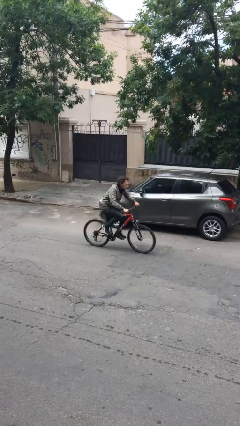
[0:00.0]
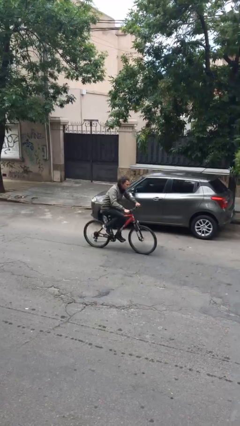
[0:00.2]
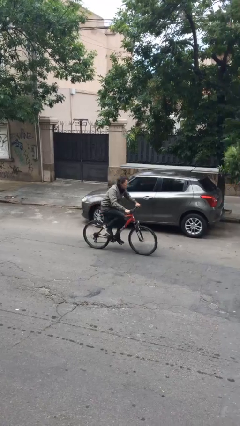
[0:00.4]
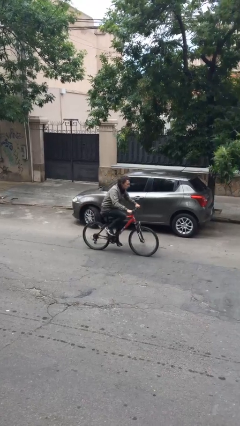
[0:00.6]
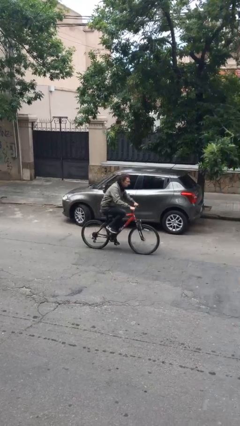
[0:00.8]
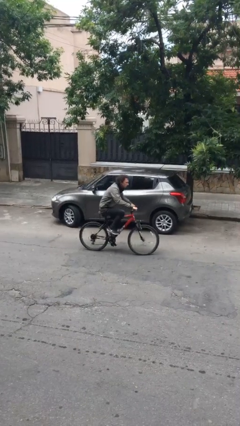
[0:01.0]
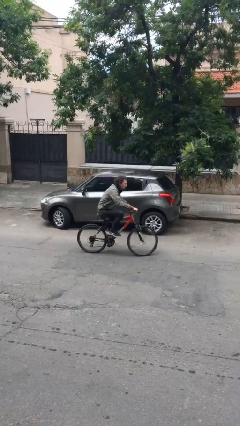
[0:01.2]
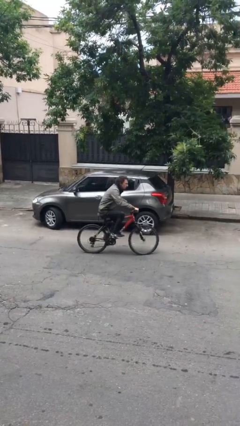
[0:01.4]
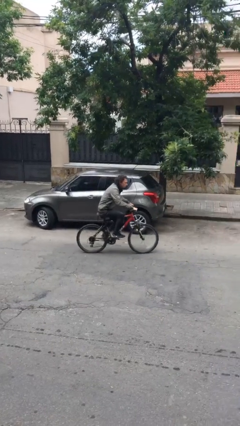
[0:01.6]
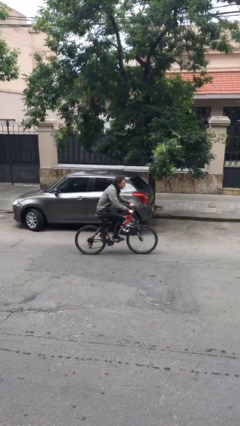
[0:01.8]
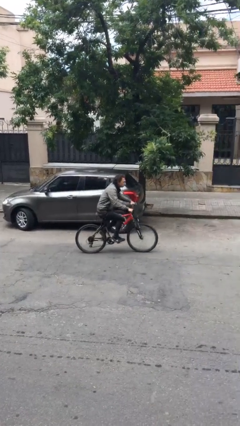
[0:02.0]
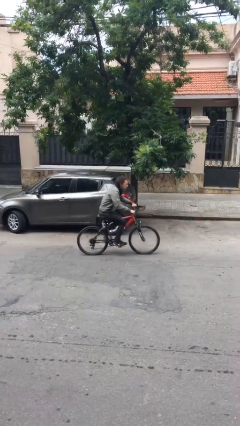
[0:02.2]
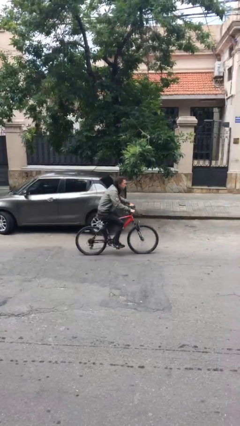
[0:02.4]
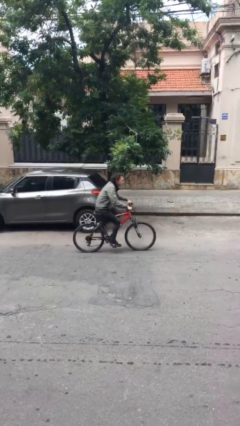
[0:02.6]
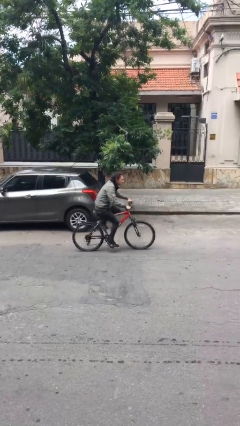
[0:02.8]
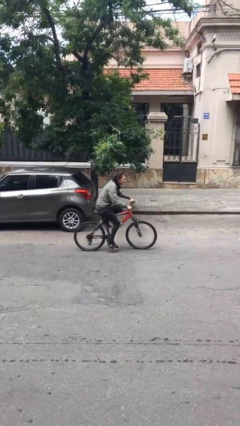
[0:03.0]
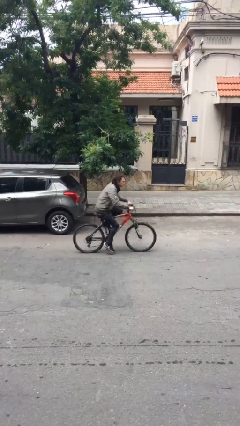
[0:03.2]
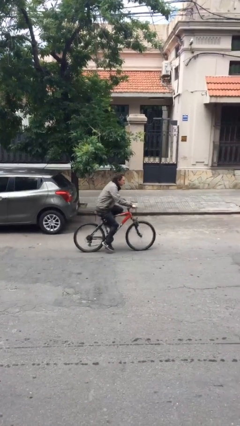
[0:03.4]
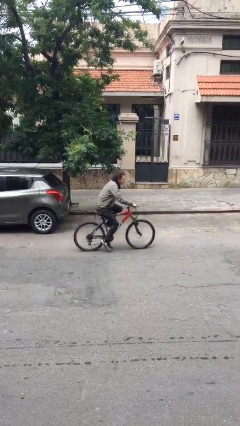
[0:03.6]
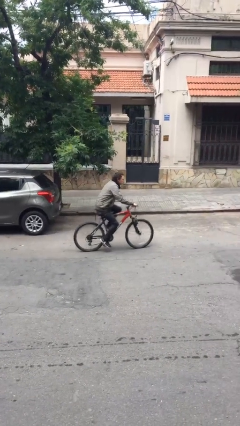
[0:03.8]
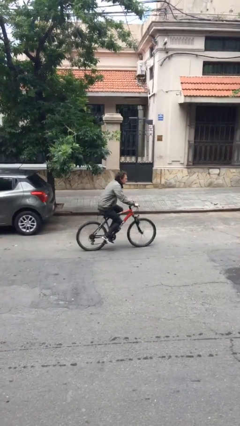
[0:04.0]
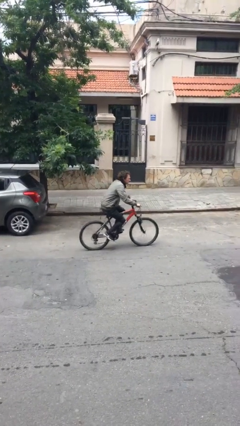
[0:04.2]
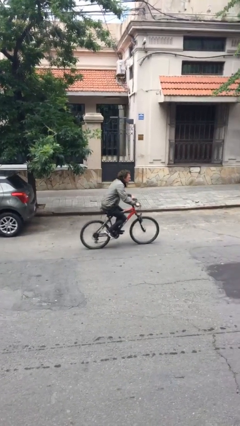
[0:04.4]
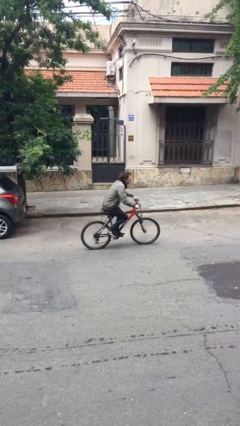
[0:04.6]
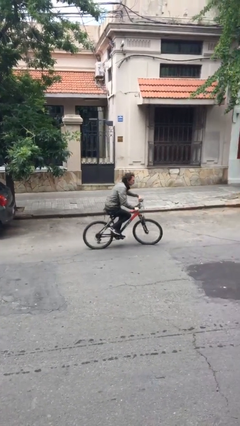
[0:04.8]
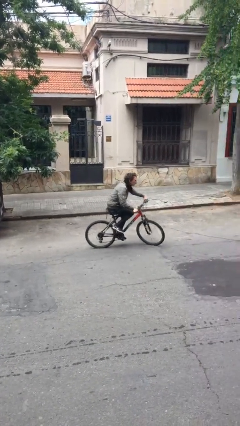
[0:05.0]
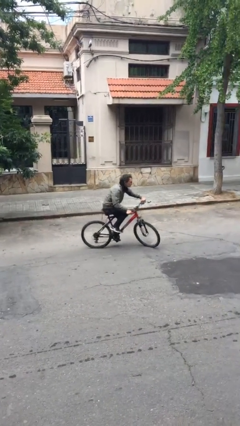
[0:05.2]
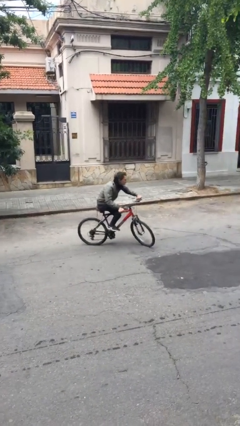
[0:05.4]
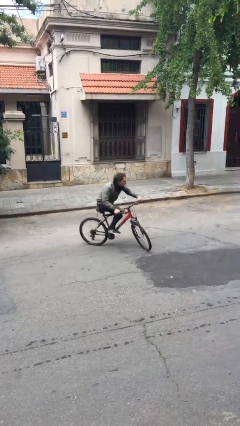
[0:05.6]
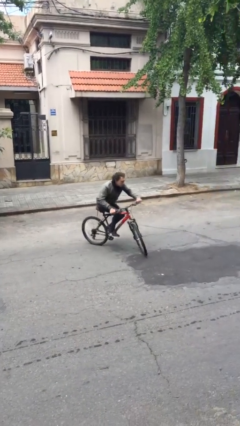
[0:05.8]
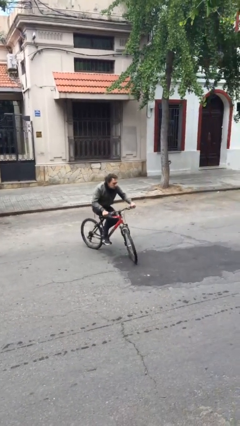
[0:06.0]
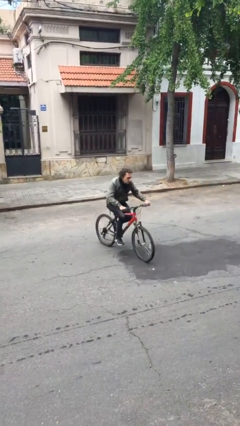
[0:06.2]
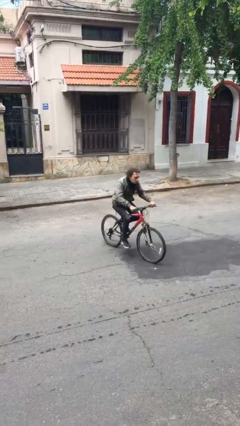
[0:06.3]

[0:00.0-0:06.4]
person rides bicycle

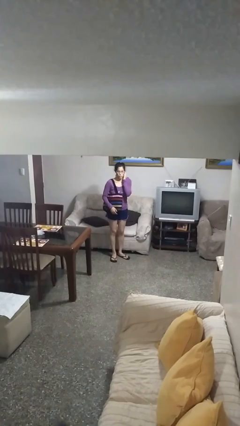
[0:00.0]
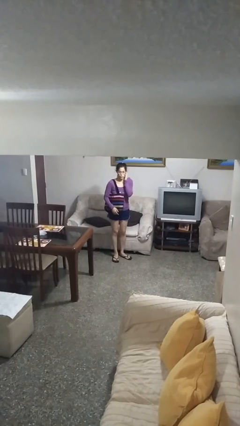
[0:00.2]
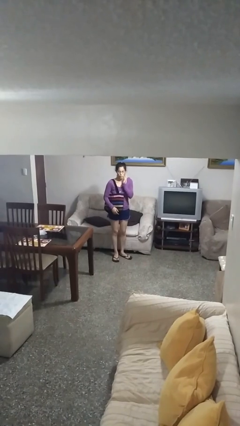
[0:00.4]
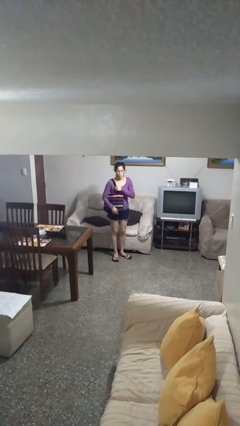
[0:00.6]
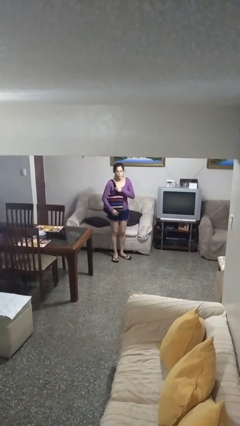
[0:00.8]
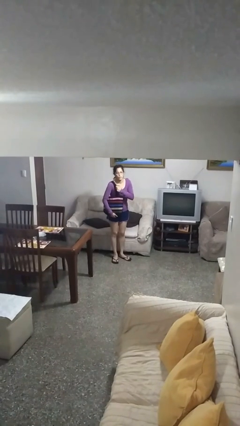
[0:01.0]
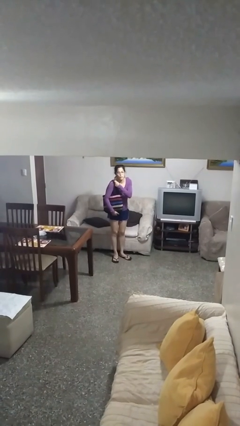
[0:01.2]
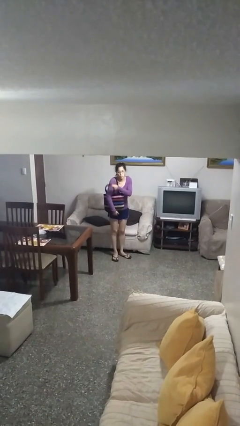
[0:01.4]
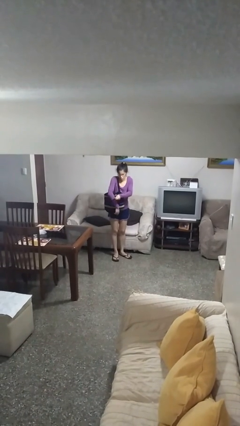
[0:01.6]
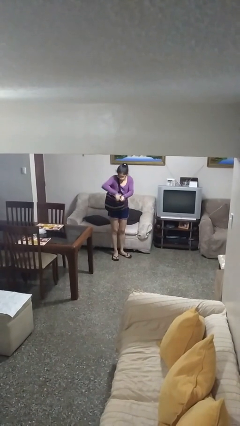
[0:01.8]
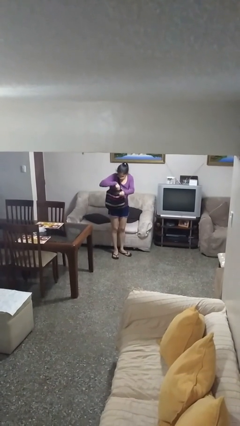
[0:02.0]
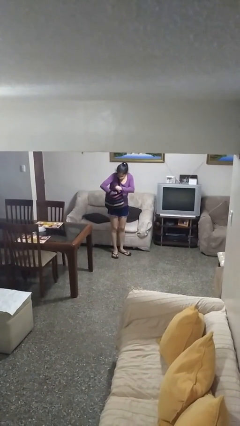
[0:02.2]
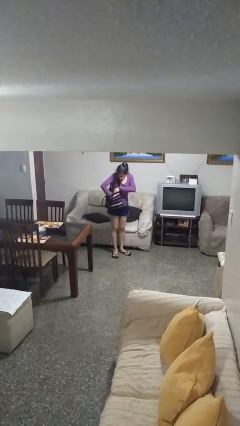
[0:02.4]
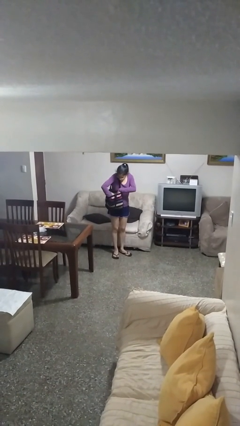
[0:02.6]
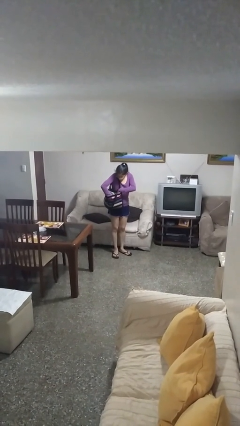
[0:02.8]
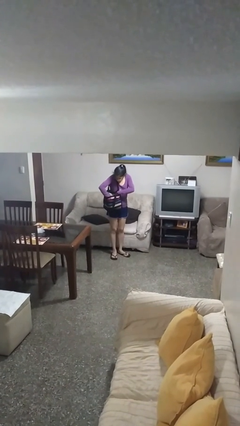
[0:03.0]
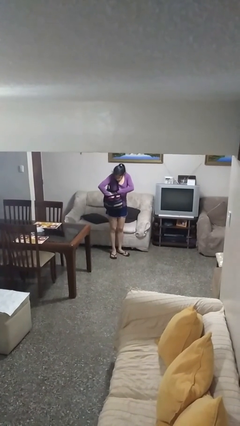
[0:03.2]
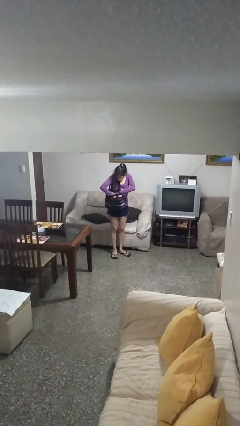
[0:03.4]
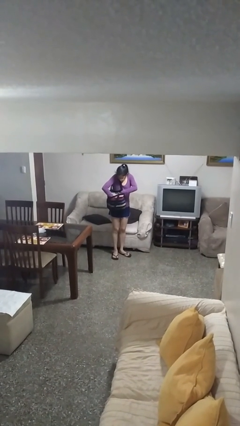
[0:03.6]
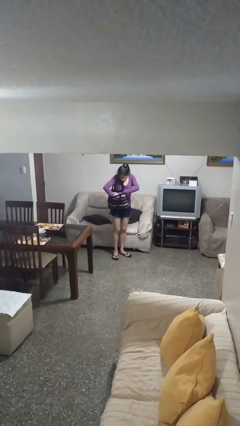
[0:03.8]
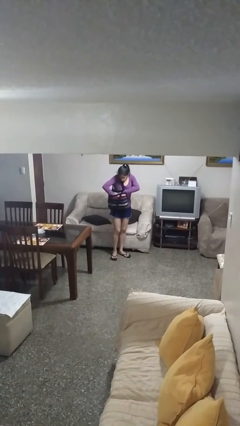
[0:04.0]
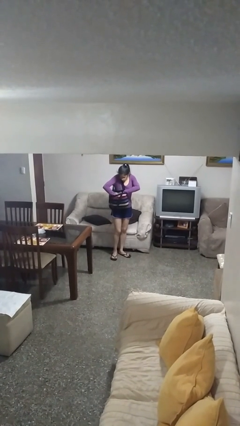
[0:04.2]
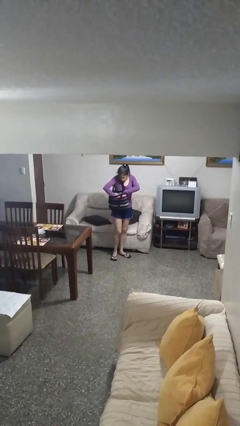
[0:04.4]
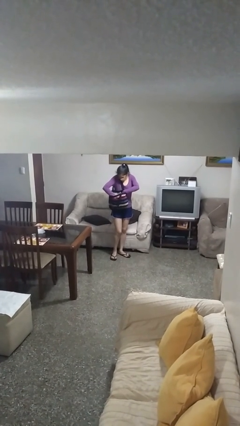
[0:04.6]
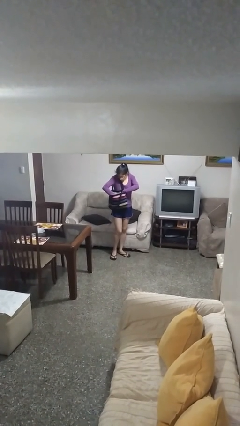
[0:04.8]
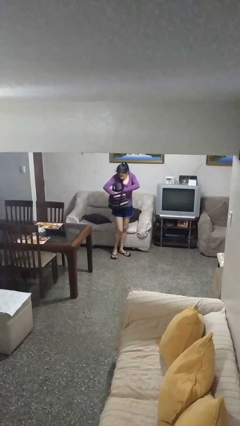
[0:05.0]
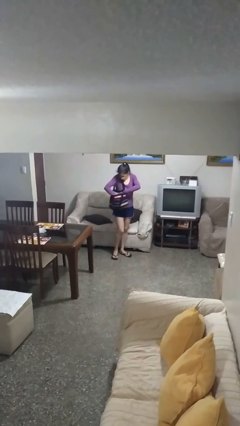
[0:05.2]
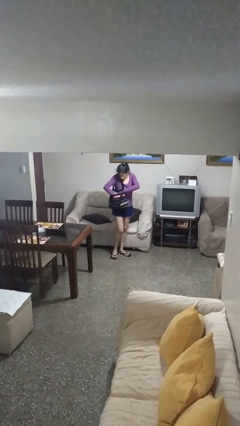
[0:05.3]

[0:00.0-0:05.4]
person searches in purse

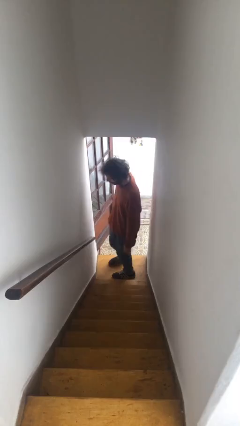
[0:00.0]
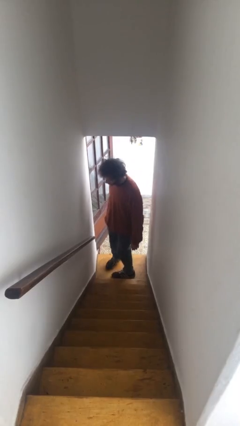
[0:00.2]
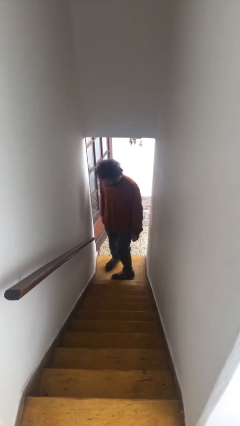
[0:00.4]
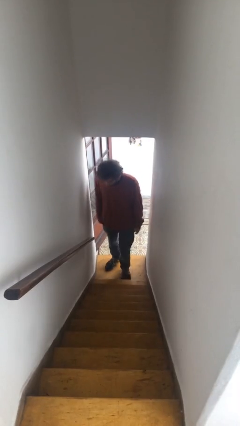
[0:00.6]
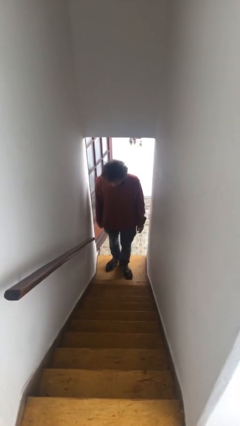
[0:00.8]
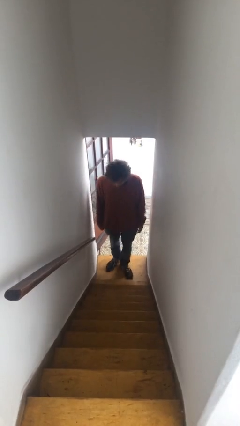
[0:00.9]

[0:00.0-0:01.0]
person climbs down stairs

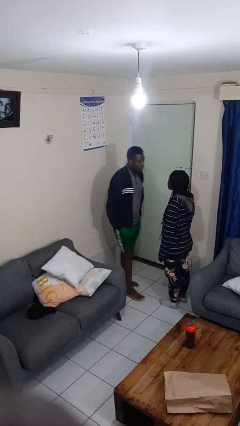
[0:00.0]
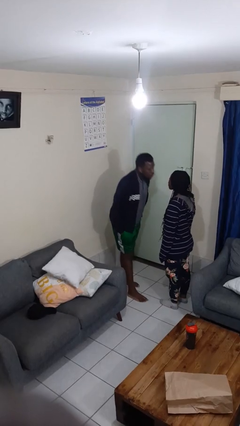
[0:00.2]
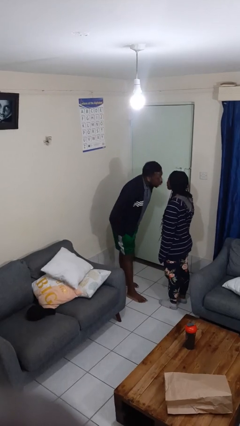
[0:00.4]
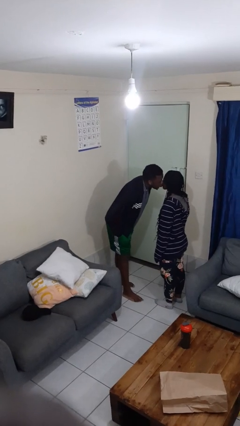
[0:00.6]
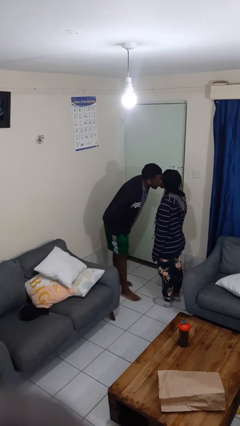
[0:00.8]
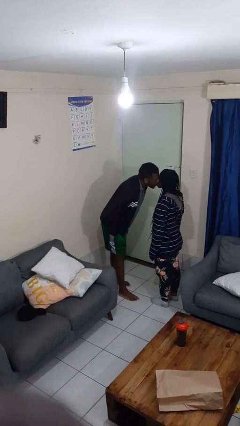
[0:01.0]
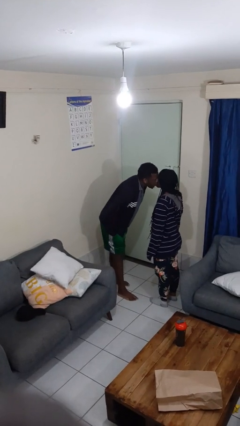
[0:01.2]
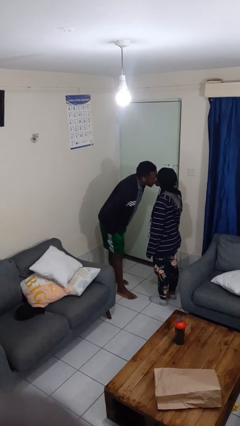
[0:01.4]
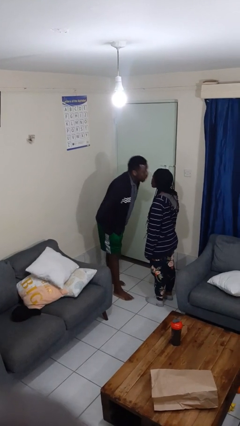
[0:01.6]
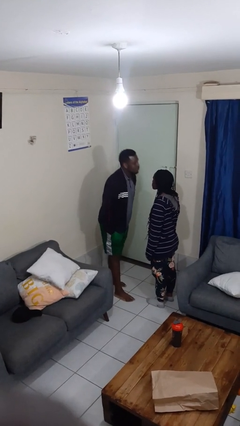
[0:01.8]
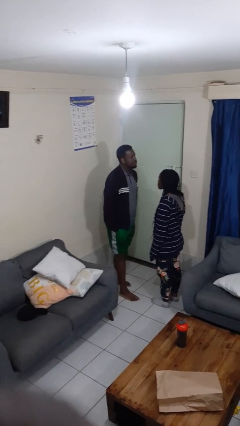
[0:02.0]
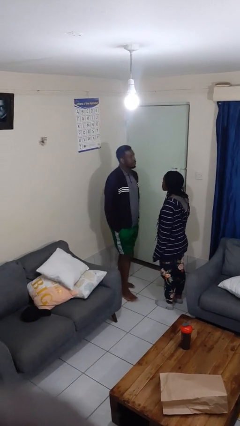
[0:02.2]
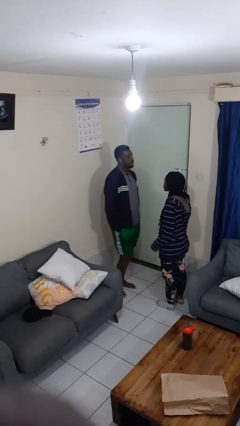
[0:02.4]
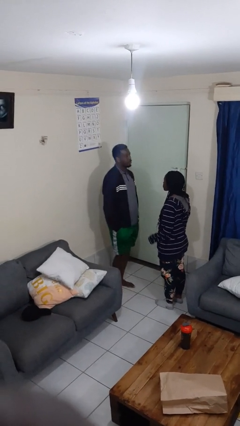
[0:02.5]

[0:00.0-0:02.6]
person kisses cheek of person

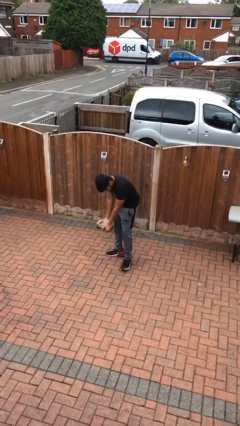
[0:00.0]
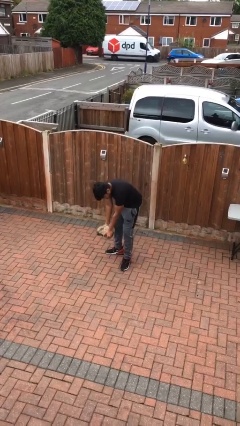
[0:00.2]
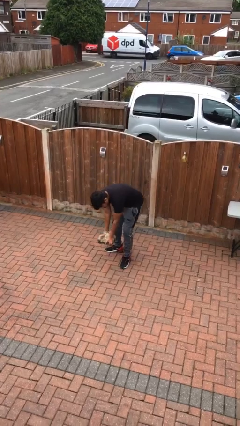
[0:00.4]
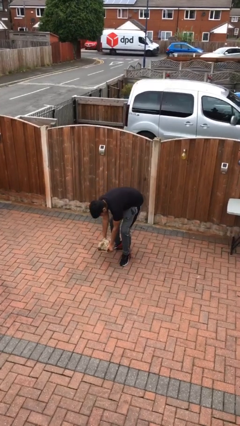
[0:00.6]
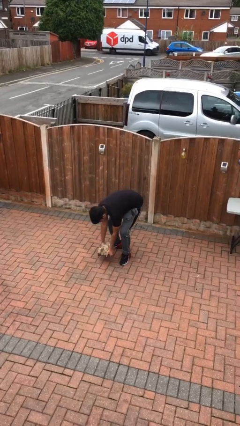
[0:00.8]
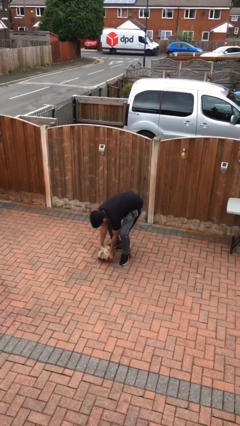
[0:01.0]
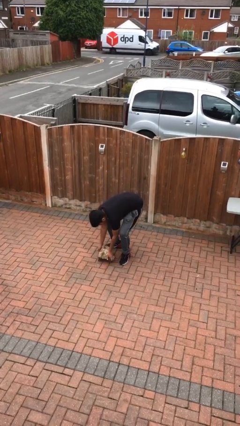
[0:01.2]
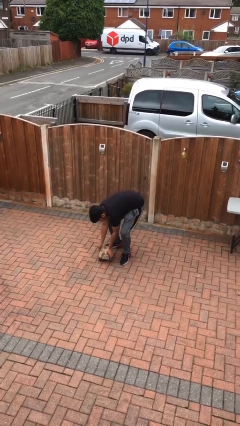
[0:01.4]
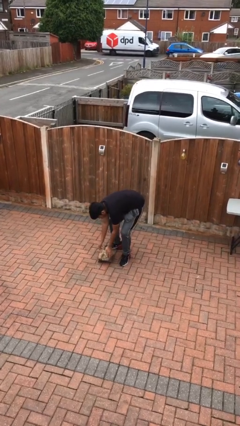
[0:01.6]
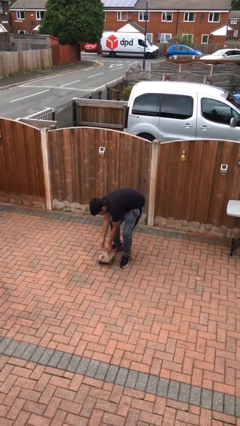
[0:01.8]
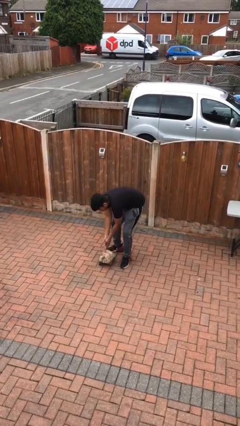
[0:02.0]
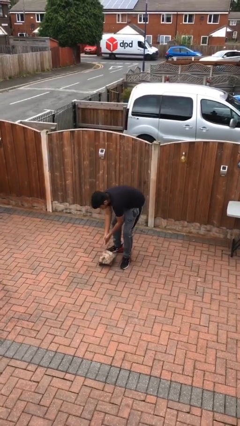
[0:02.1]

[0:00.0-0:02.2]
person puts down object on floor

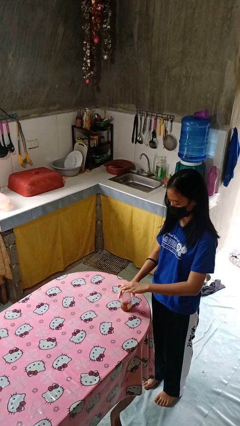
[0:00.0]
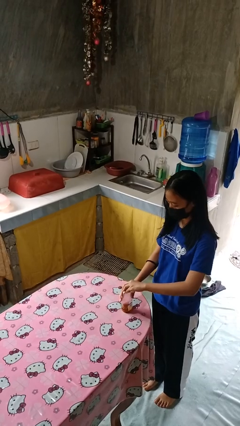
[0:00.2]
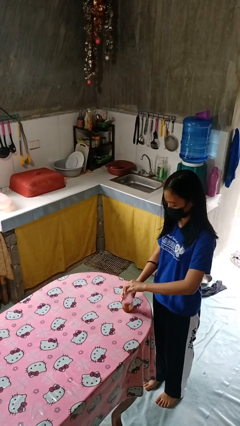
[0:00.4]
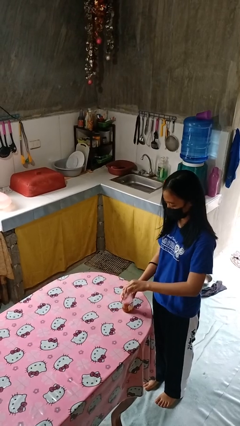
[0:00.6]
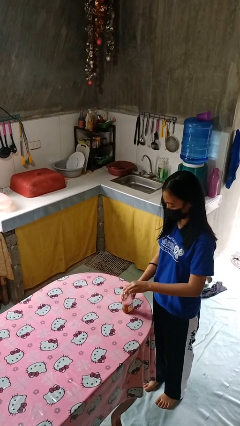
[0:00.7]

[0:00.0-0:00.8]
person opens jar
